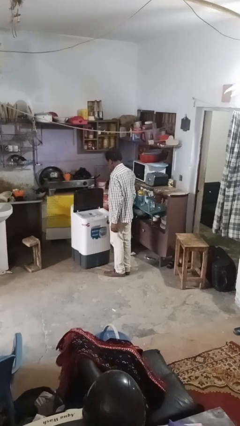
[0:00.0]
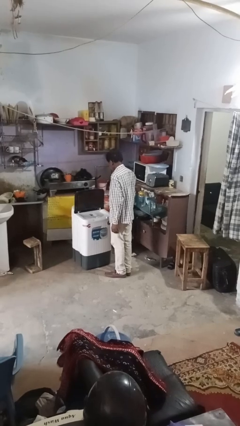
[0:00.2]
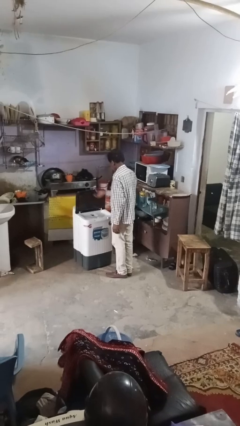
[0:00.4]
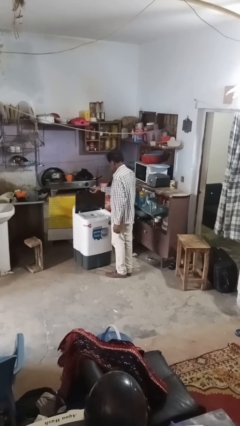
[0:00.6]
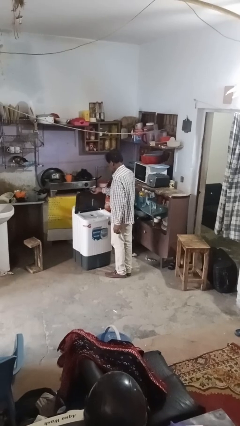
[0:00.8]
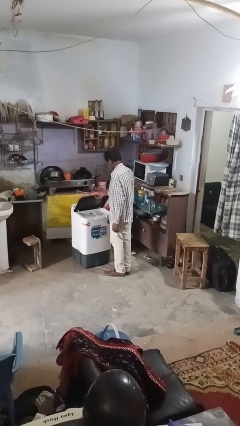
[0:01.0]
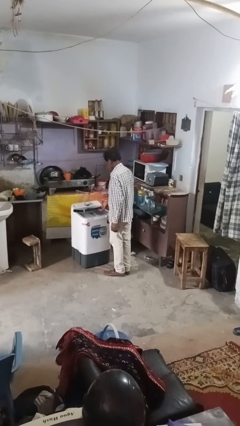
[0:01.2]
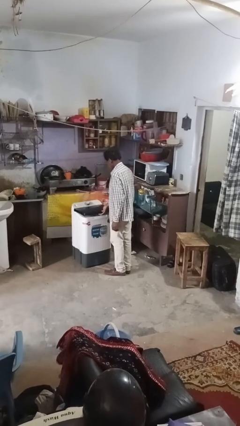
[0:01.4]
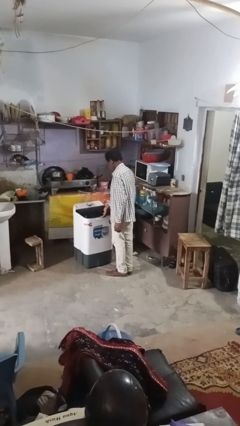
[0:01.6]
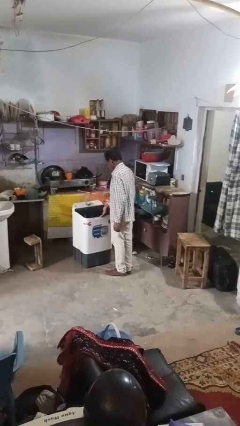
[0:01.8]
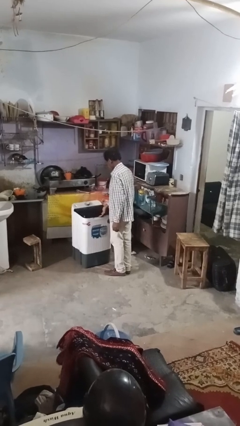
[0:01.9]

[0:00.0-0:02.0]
person closes clothes washer

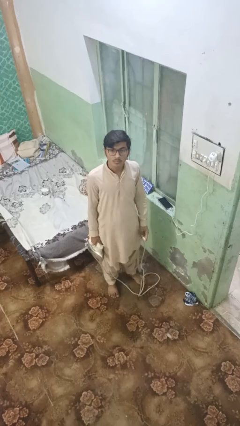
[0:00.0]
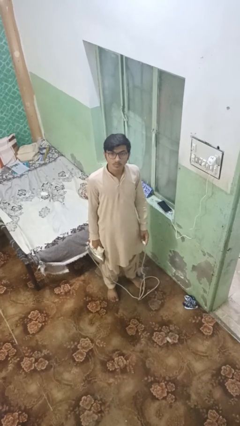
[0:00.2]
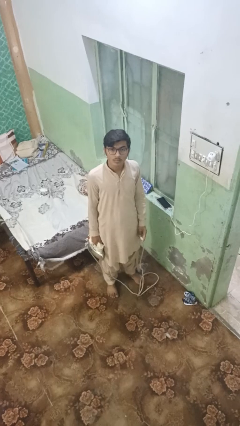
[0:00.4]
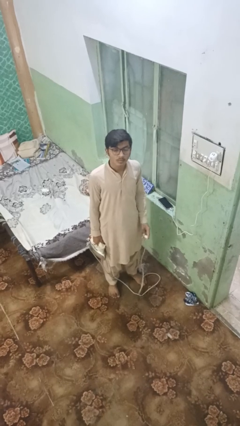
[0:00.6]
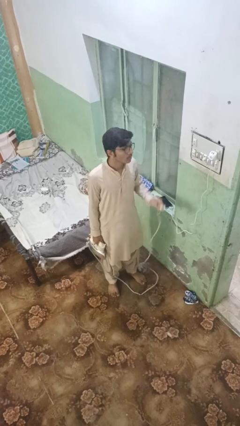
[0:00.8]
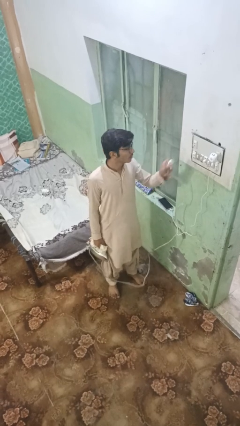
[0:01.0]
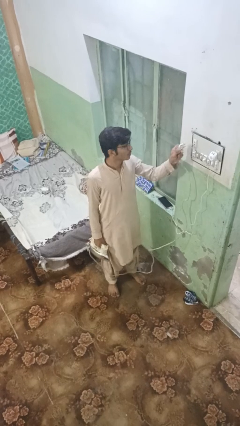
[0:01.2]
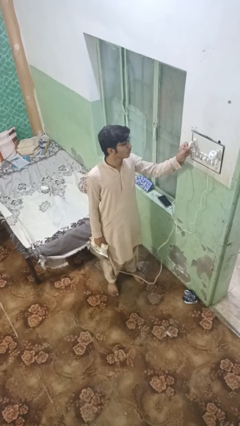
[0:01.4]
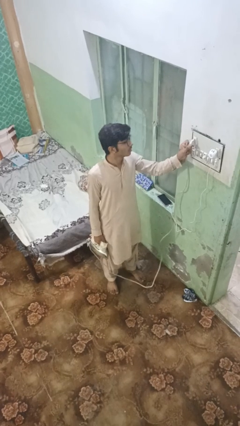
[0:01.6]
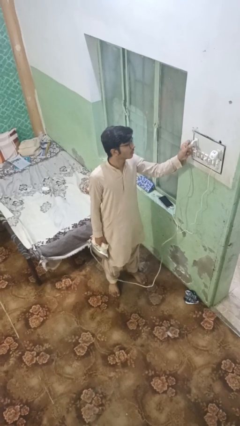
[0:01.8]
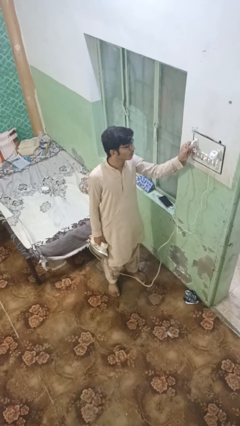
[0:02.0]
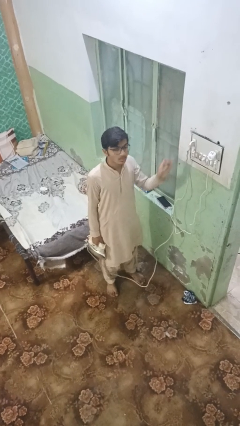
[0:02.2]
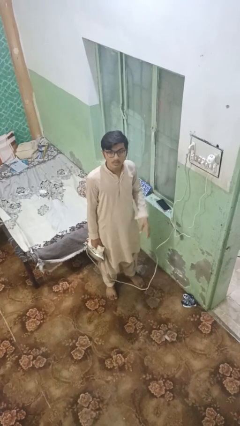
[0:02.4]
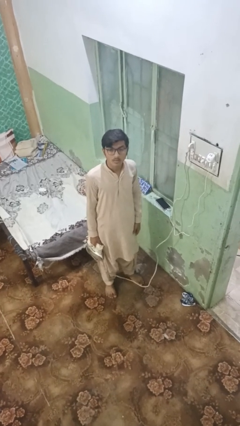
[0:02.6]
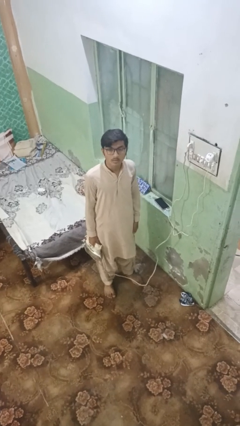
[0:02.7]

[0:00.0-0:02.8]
person plugs into electrical socket

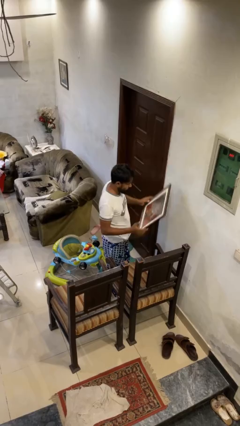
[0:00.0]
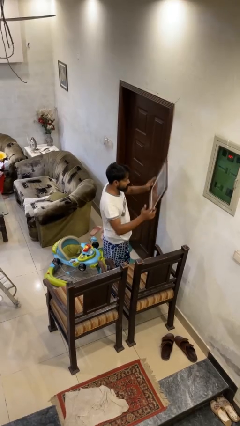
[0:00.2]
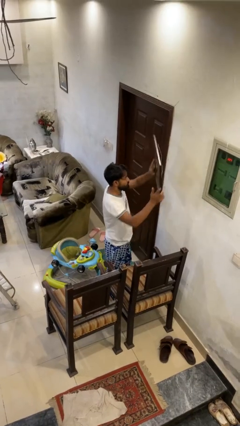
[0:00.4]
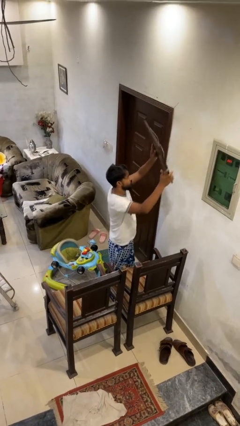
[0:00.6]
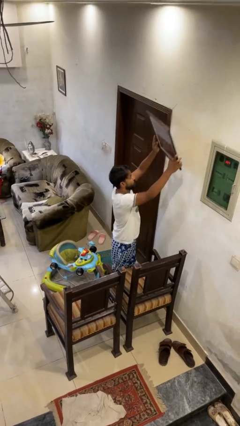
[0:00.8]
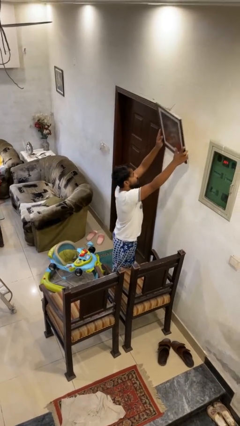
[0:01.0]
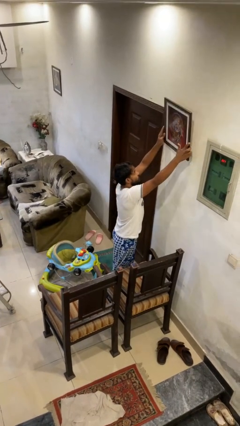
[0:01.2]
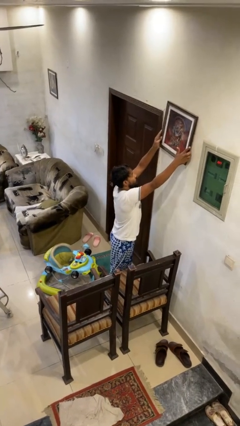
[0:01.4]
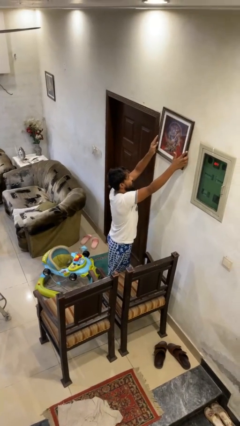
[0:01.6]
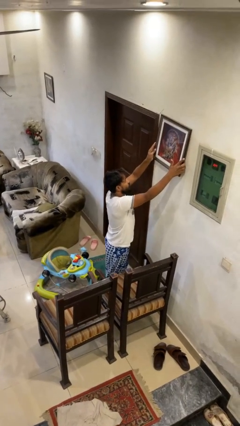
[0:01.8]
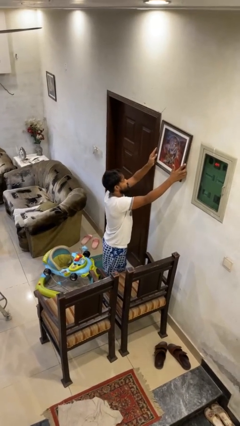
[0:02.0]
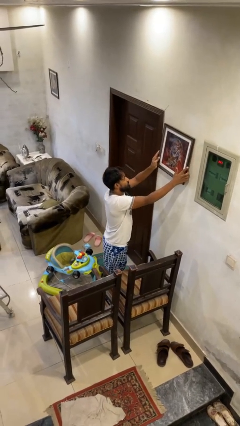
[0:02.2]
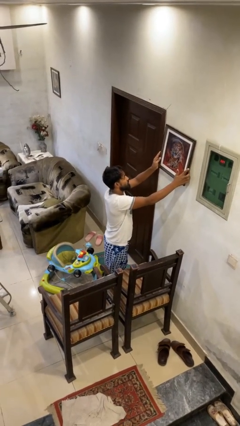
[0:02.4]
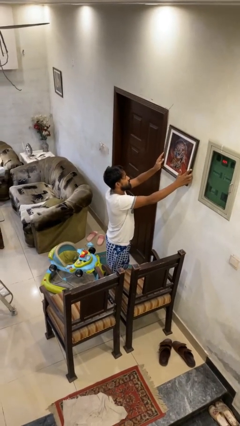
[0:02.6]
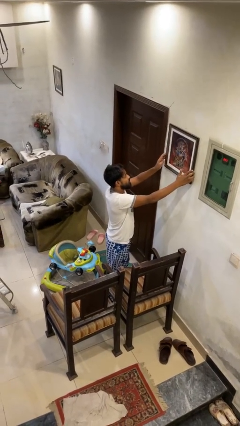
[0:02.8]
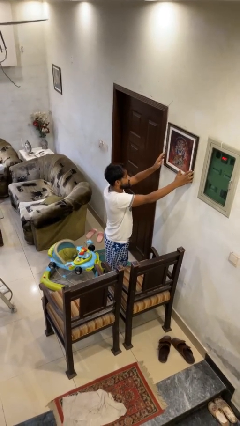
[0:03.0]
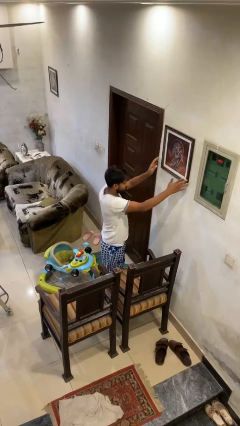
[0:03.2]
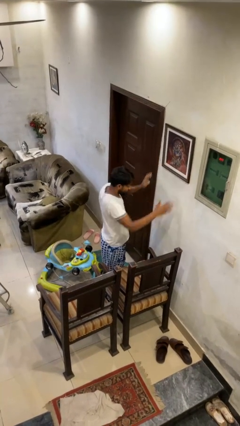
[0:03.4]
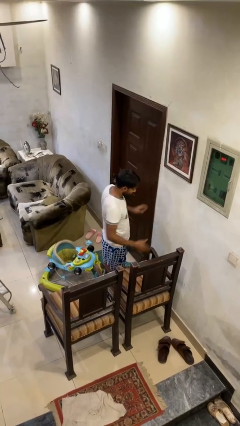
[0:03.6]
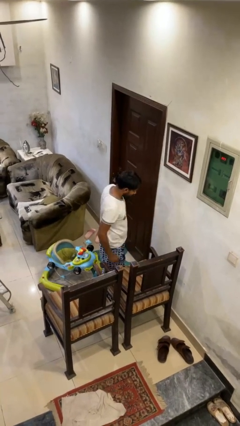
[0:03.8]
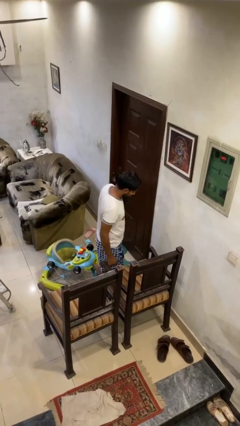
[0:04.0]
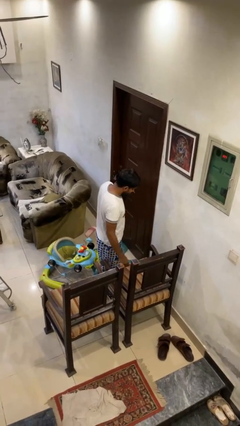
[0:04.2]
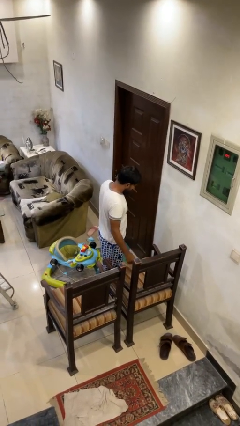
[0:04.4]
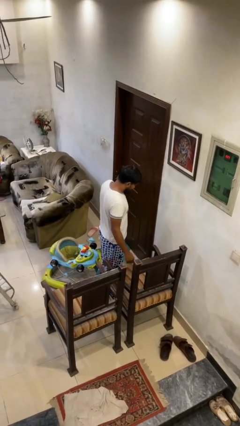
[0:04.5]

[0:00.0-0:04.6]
person puts up picture frame

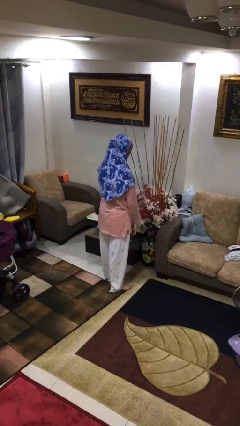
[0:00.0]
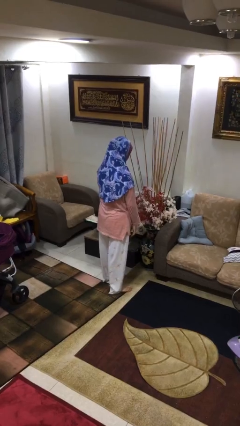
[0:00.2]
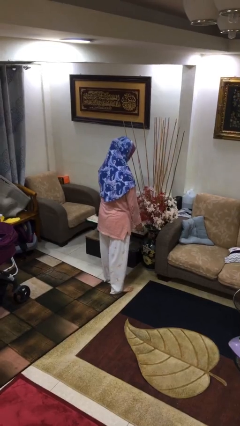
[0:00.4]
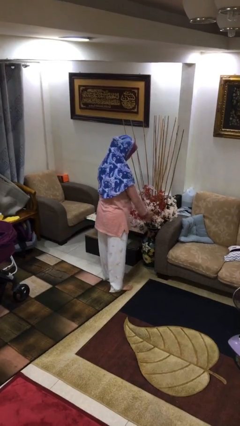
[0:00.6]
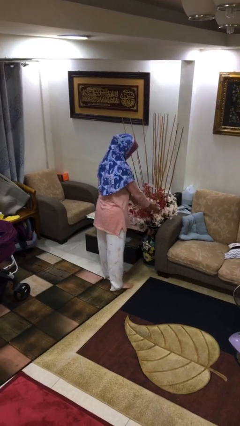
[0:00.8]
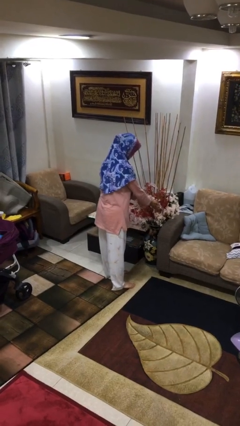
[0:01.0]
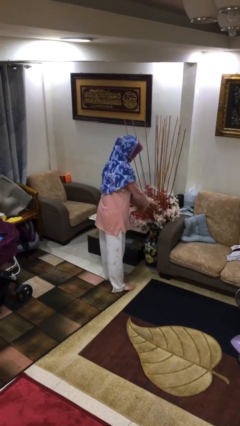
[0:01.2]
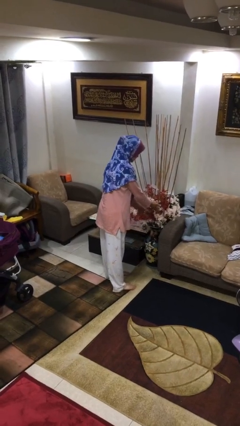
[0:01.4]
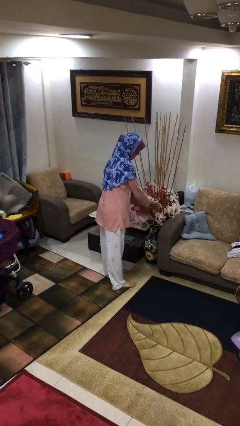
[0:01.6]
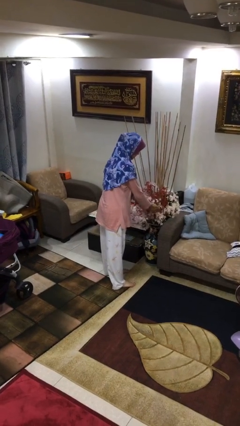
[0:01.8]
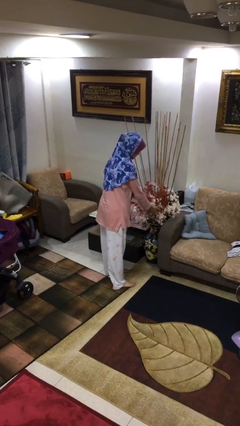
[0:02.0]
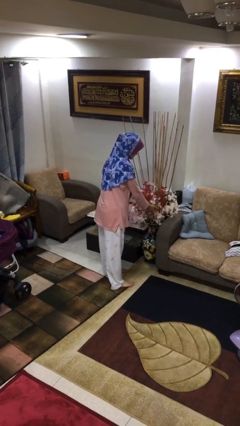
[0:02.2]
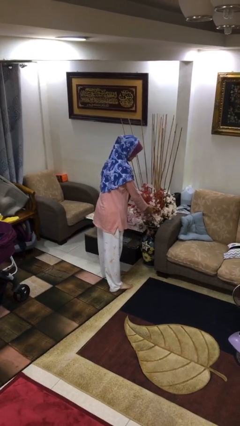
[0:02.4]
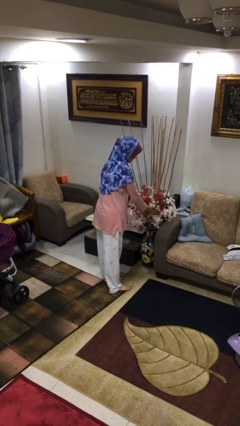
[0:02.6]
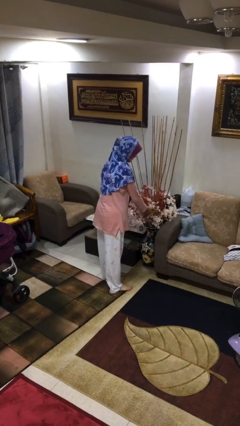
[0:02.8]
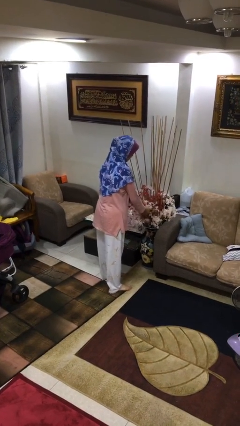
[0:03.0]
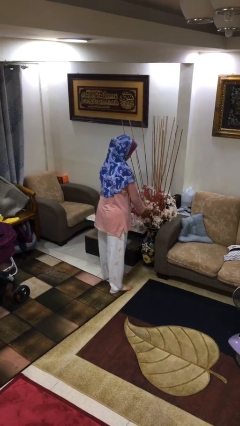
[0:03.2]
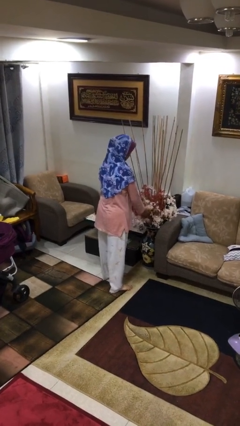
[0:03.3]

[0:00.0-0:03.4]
person arranges flowers in vase

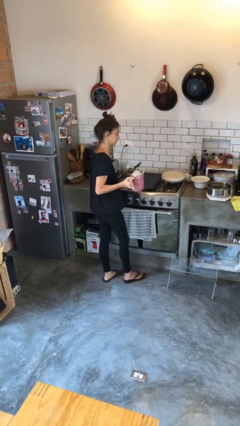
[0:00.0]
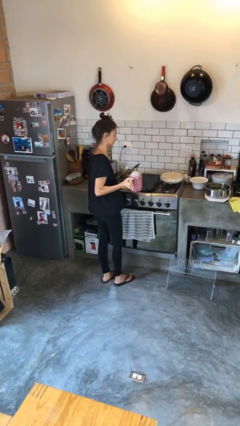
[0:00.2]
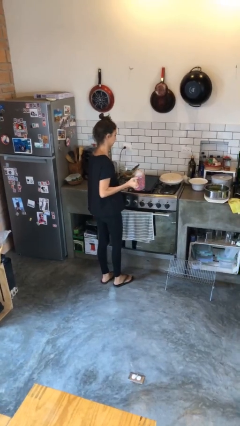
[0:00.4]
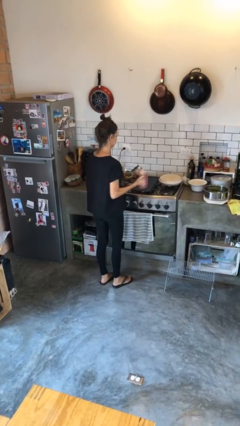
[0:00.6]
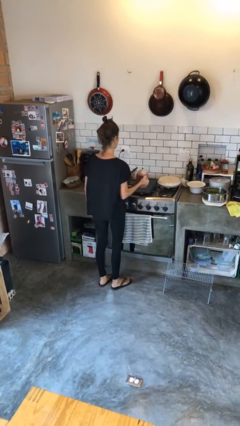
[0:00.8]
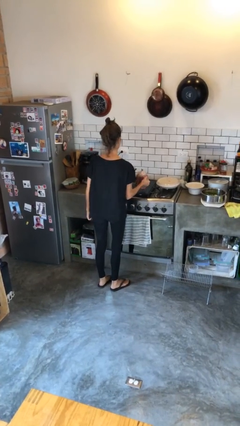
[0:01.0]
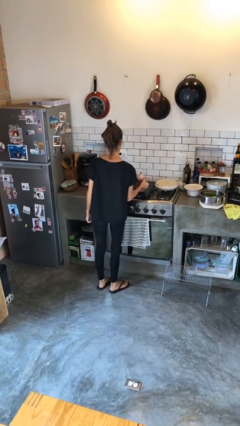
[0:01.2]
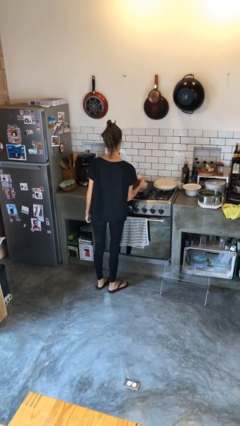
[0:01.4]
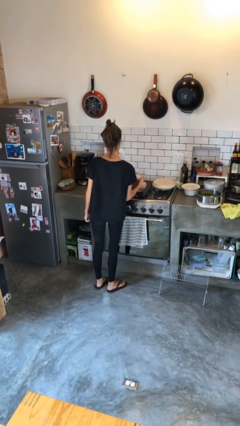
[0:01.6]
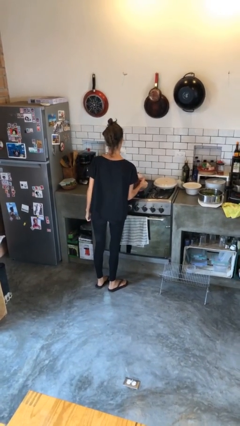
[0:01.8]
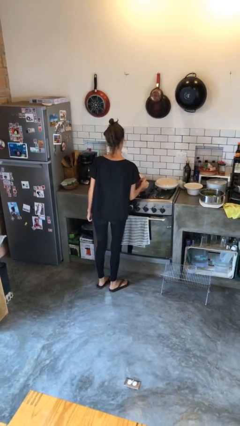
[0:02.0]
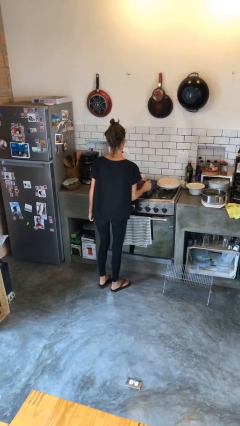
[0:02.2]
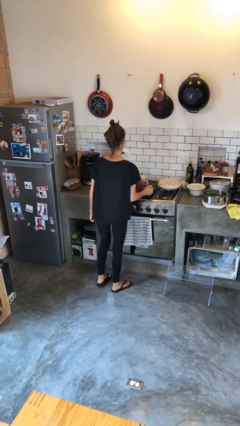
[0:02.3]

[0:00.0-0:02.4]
person puts down object on countertop

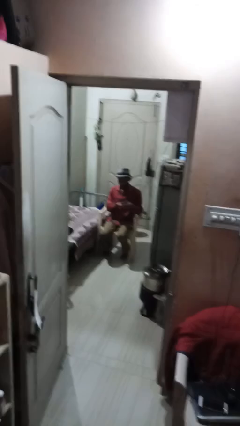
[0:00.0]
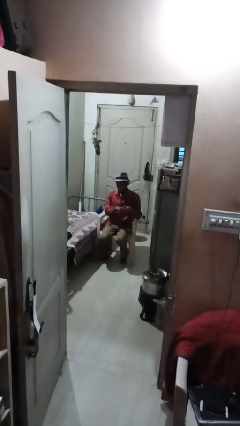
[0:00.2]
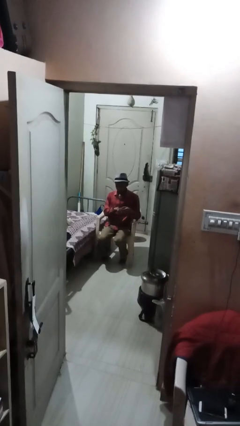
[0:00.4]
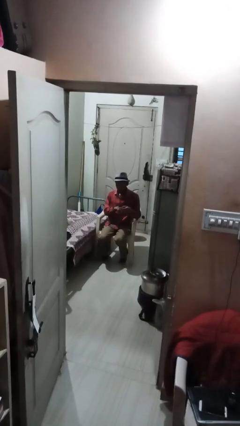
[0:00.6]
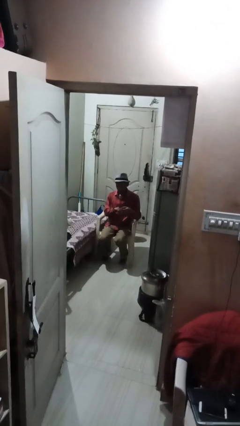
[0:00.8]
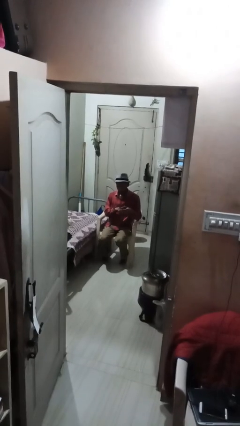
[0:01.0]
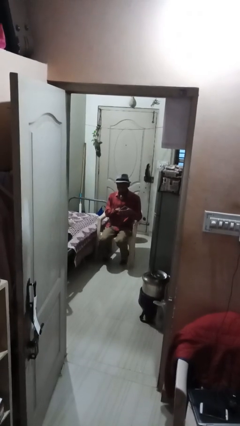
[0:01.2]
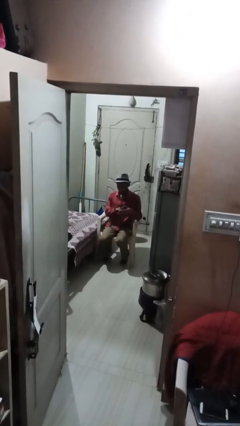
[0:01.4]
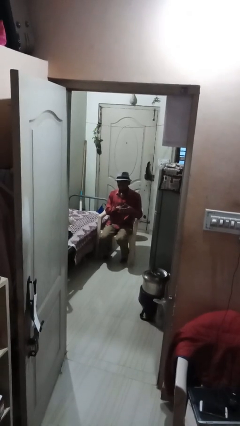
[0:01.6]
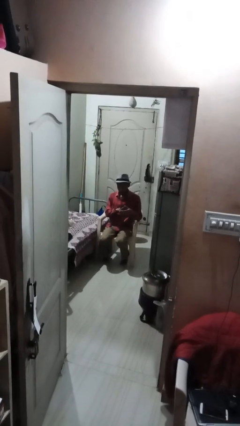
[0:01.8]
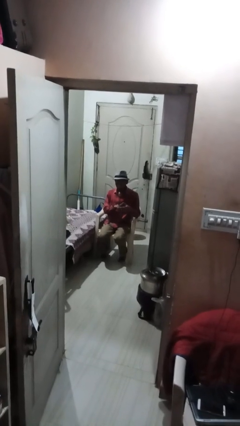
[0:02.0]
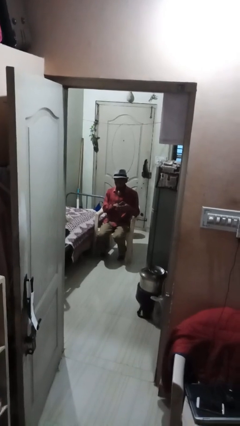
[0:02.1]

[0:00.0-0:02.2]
person clips fingernails
